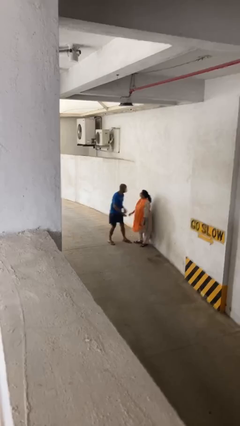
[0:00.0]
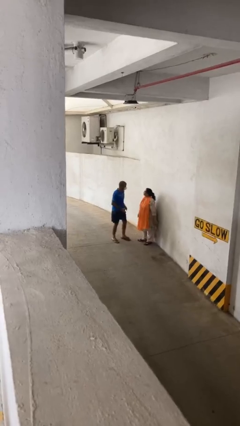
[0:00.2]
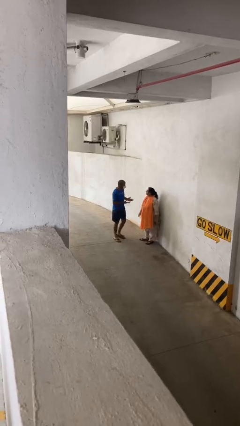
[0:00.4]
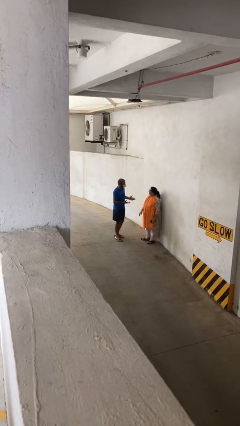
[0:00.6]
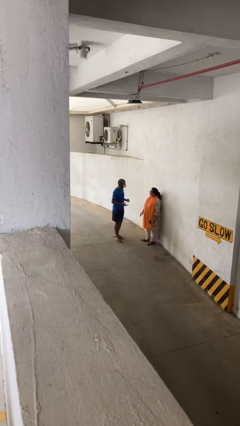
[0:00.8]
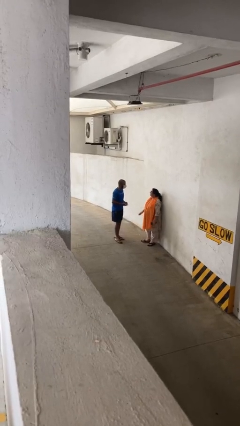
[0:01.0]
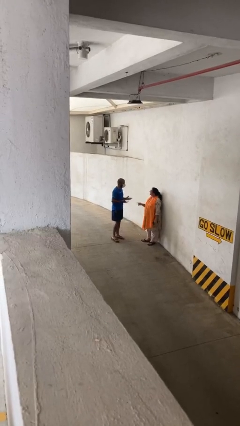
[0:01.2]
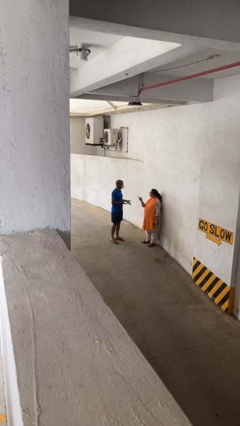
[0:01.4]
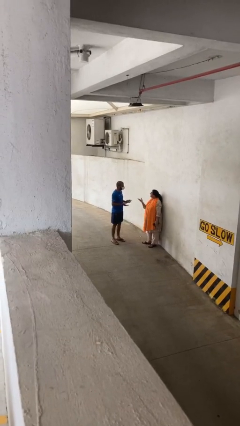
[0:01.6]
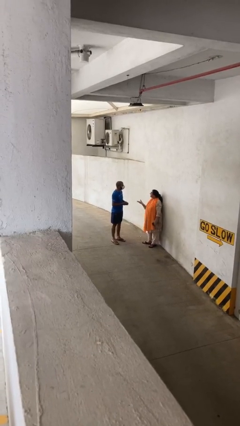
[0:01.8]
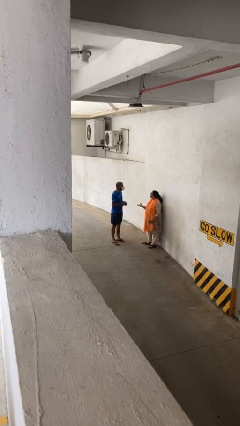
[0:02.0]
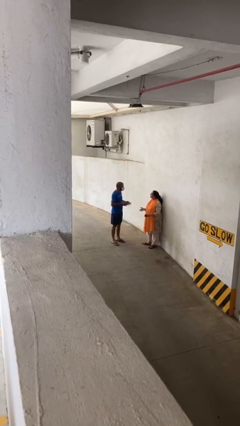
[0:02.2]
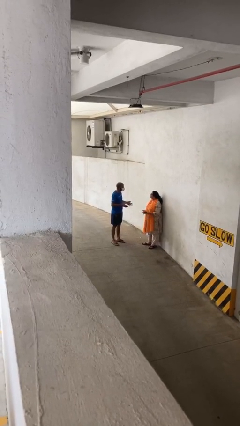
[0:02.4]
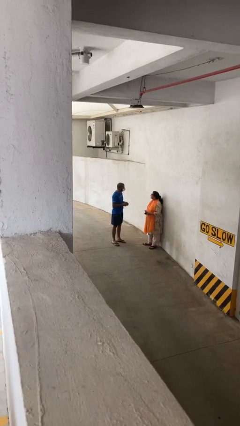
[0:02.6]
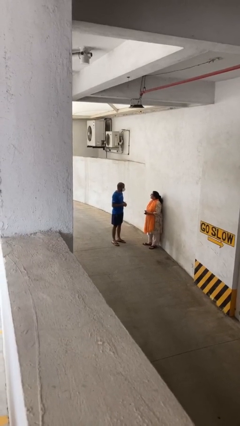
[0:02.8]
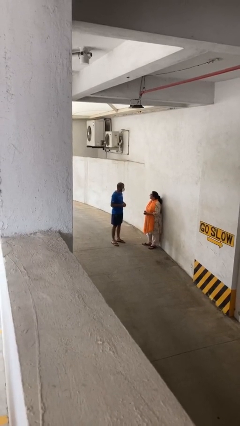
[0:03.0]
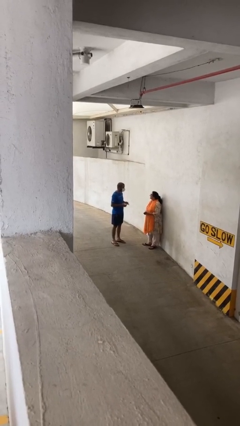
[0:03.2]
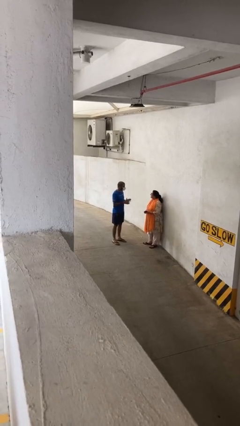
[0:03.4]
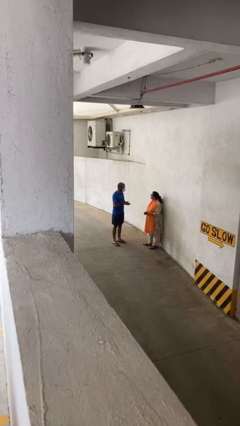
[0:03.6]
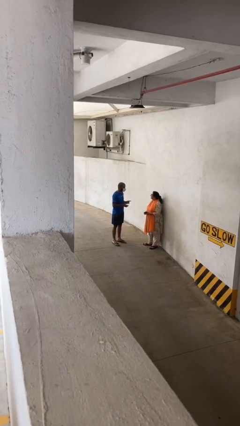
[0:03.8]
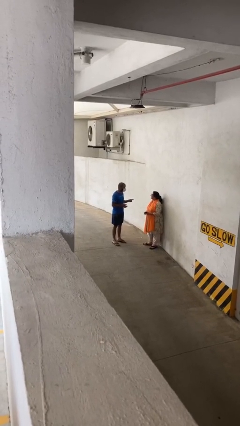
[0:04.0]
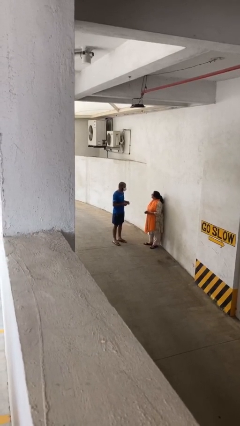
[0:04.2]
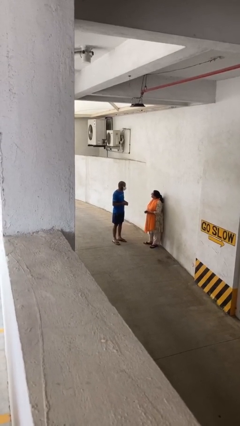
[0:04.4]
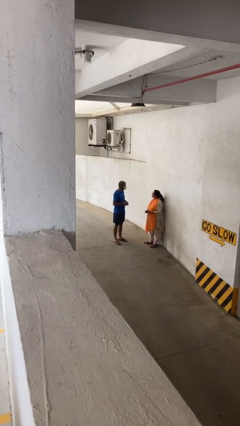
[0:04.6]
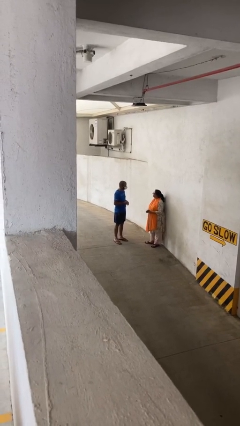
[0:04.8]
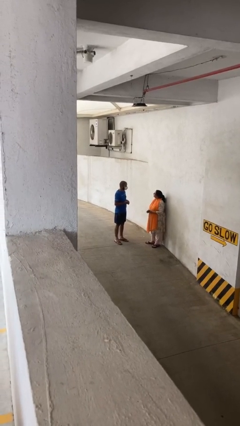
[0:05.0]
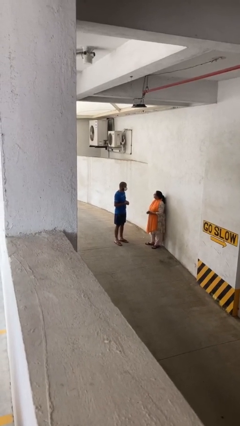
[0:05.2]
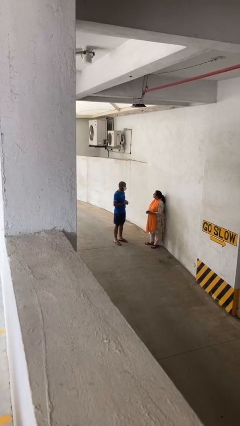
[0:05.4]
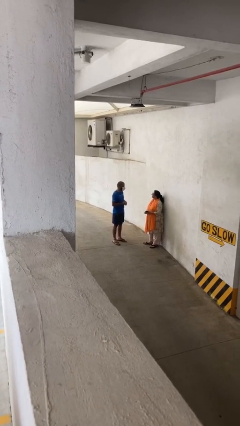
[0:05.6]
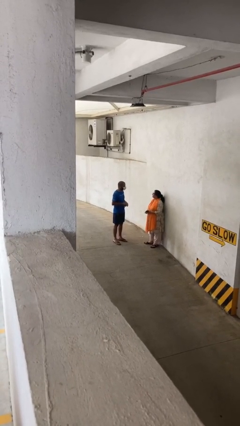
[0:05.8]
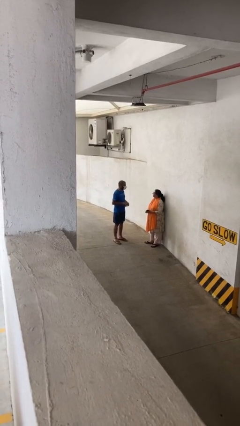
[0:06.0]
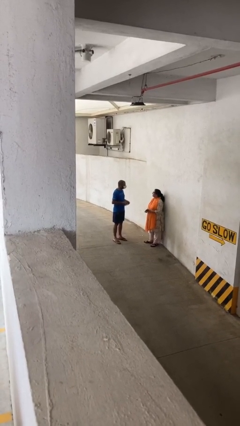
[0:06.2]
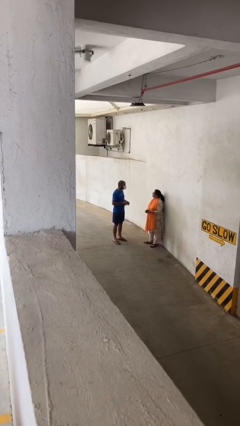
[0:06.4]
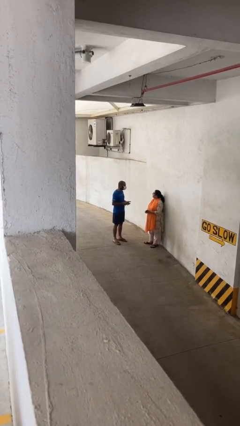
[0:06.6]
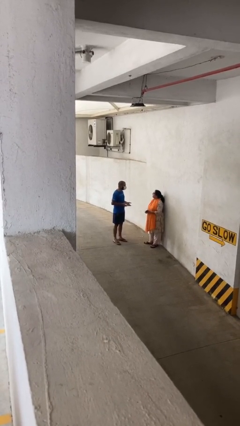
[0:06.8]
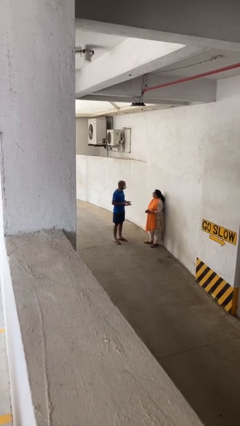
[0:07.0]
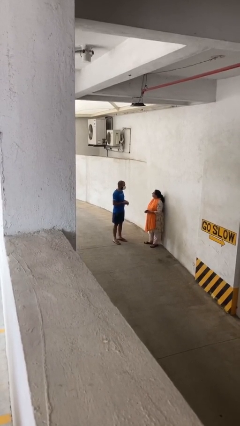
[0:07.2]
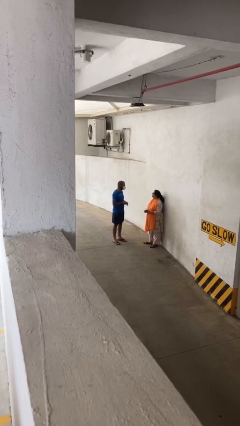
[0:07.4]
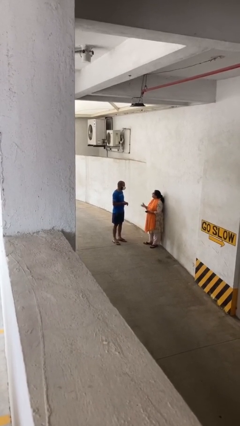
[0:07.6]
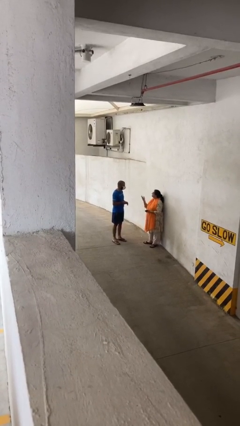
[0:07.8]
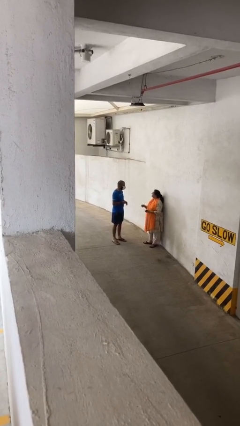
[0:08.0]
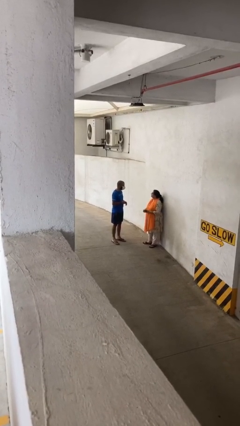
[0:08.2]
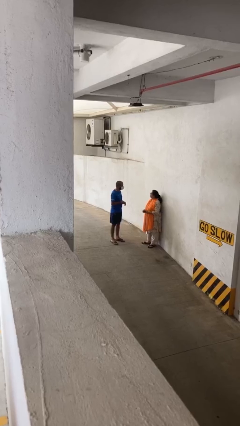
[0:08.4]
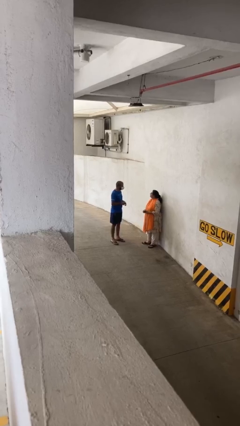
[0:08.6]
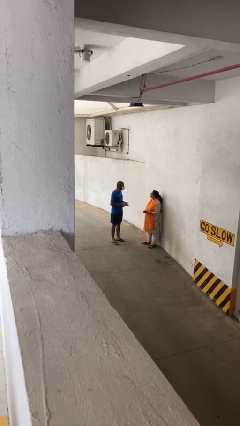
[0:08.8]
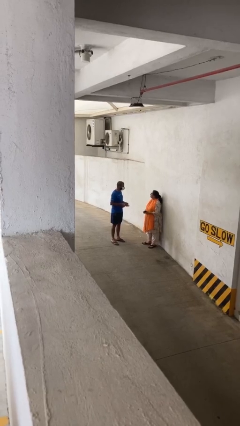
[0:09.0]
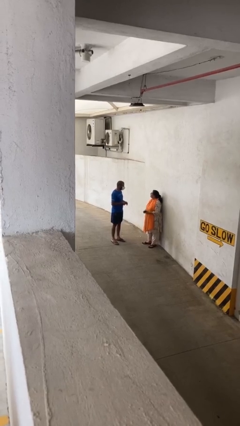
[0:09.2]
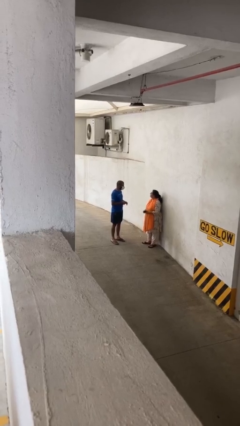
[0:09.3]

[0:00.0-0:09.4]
person talks to person

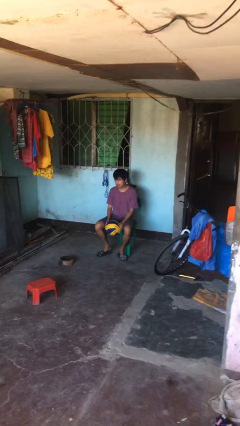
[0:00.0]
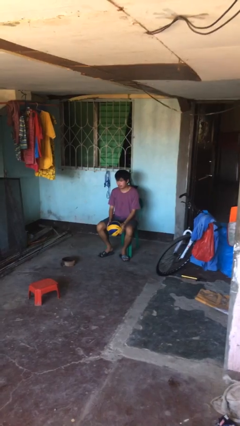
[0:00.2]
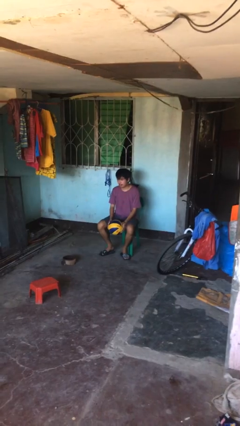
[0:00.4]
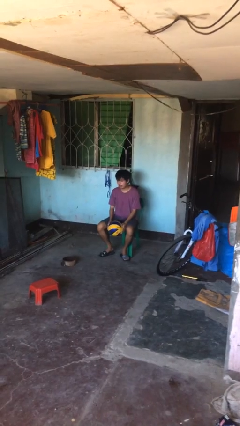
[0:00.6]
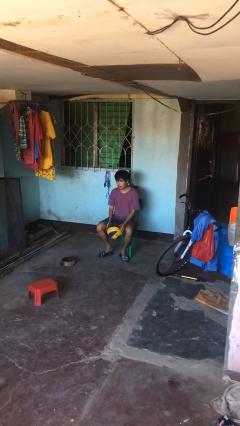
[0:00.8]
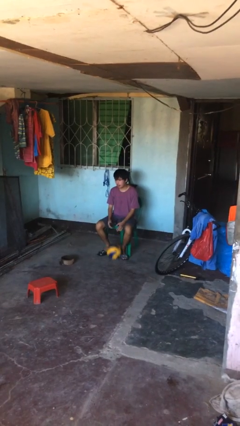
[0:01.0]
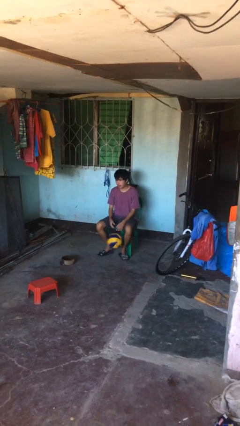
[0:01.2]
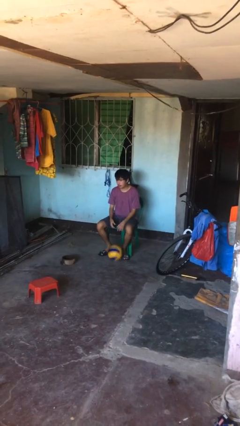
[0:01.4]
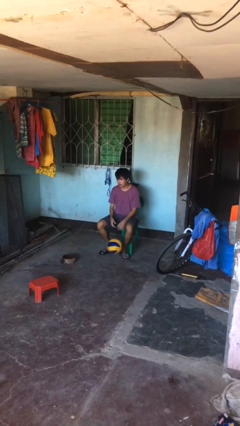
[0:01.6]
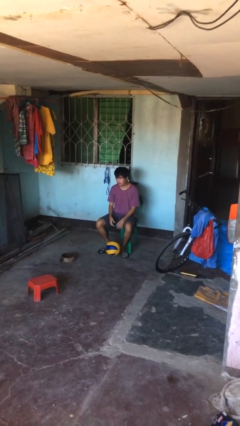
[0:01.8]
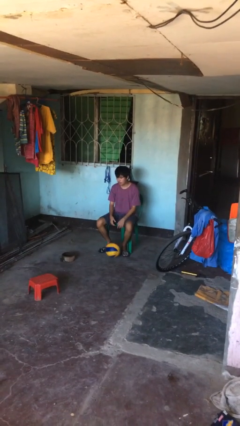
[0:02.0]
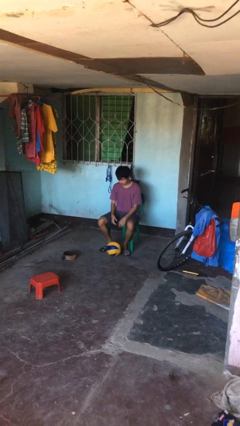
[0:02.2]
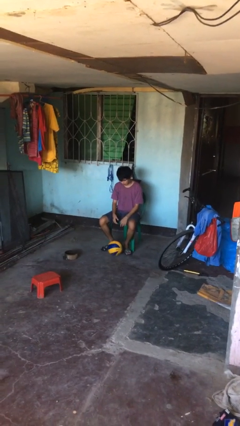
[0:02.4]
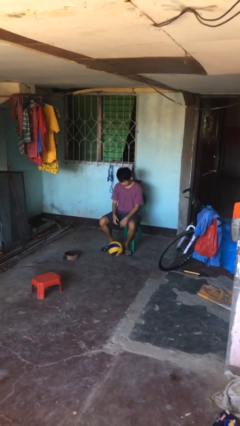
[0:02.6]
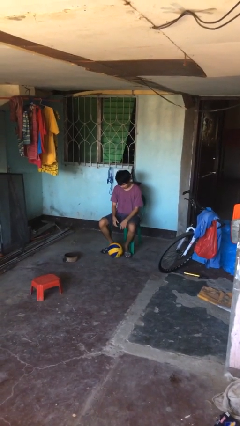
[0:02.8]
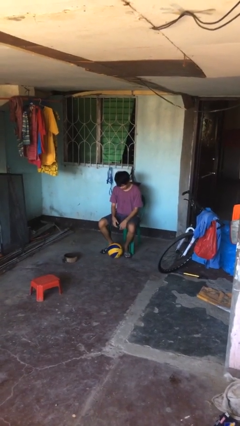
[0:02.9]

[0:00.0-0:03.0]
person drops object

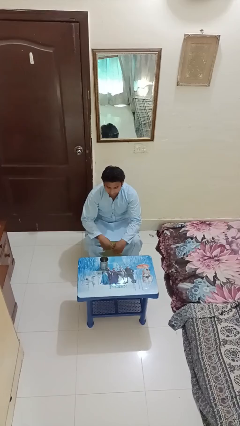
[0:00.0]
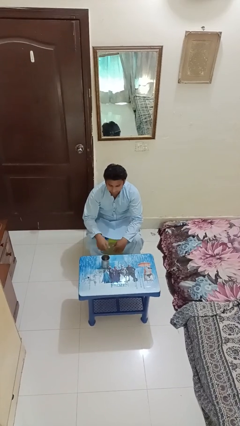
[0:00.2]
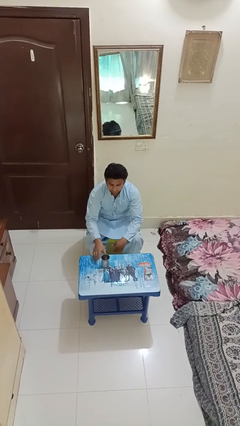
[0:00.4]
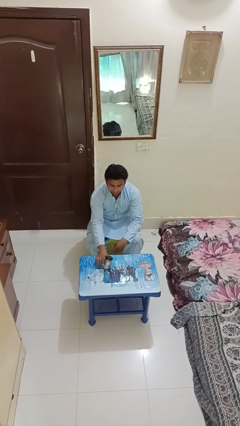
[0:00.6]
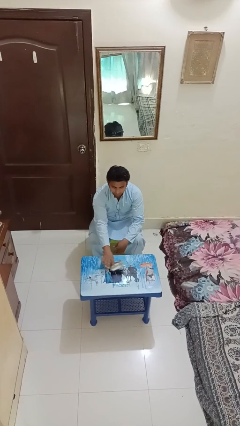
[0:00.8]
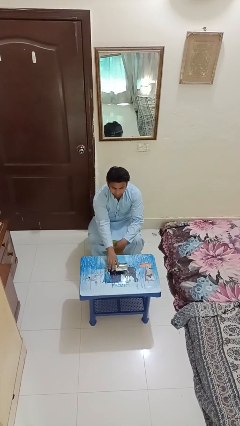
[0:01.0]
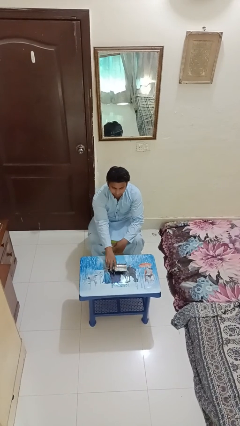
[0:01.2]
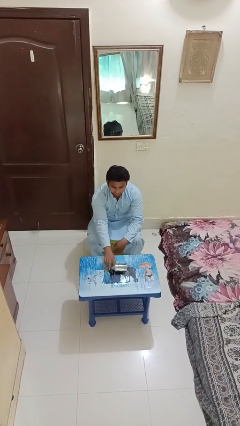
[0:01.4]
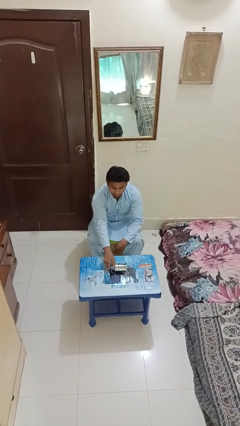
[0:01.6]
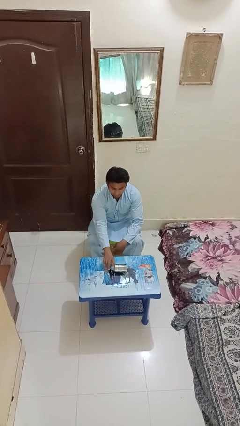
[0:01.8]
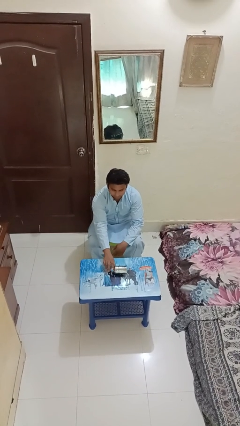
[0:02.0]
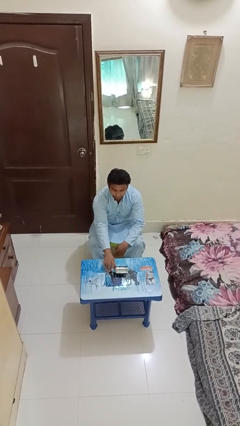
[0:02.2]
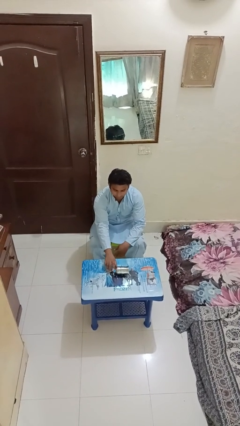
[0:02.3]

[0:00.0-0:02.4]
person knocks over glass

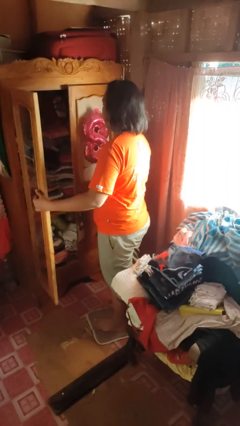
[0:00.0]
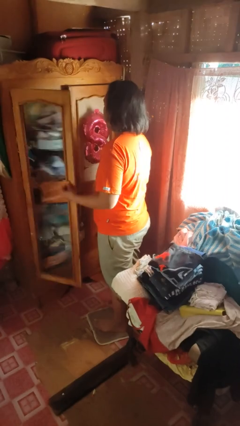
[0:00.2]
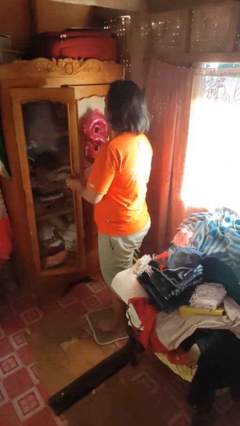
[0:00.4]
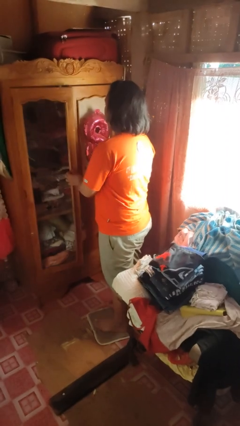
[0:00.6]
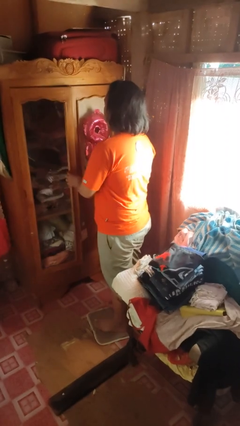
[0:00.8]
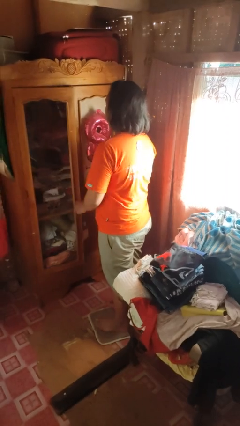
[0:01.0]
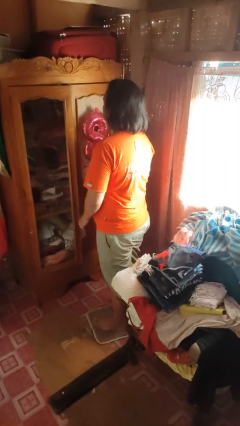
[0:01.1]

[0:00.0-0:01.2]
person closes dresser drawer

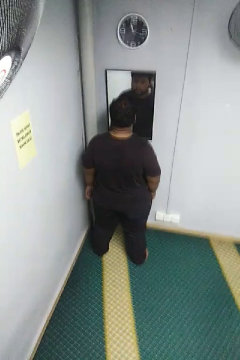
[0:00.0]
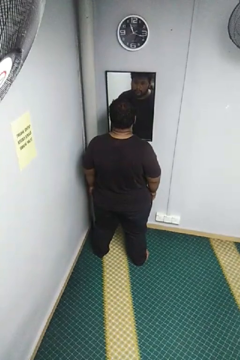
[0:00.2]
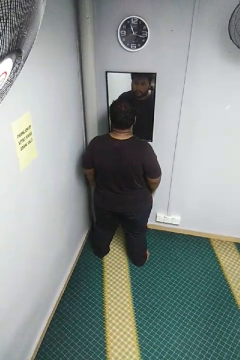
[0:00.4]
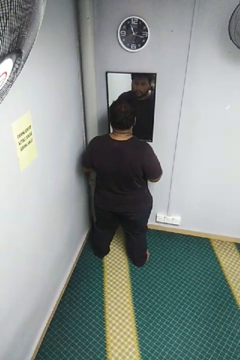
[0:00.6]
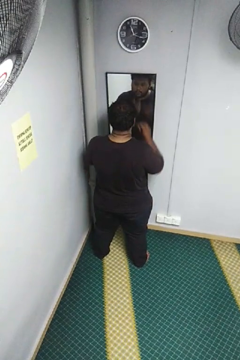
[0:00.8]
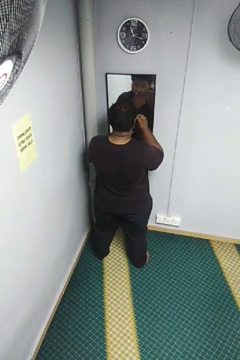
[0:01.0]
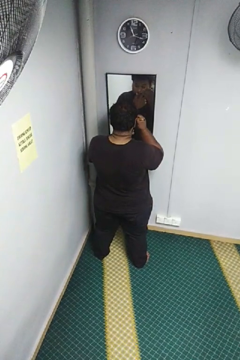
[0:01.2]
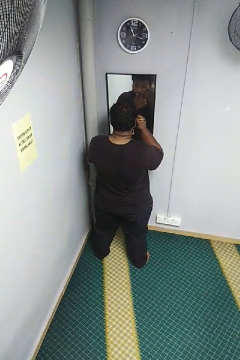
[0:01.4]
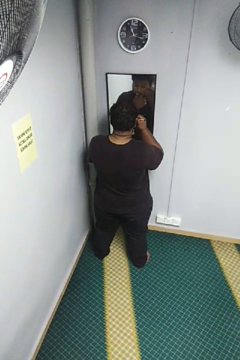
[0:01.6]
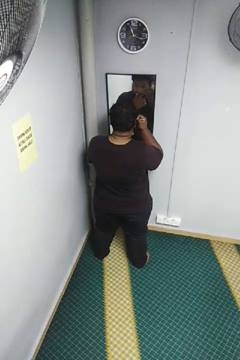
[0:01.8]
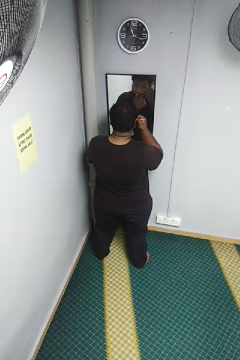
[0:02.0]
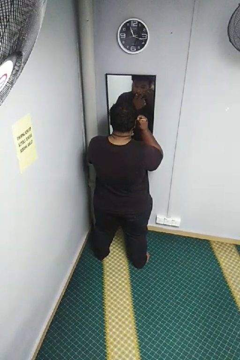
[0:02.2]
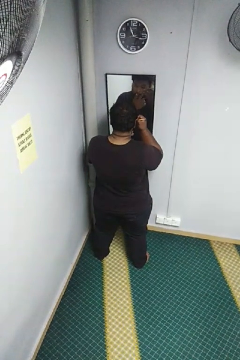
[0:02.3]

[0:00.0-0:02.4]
person applies eye makeup
